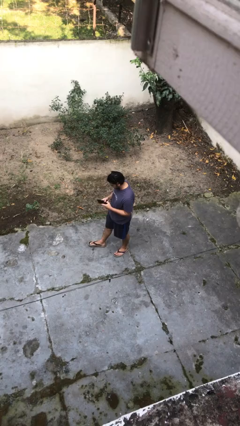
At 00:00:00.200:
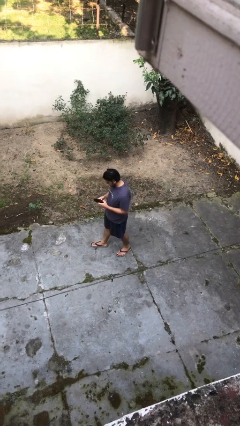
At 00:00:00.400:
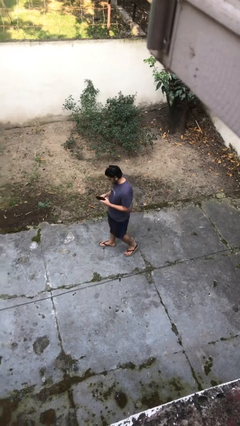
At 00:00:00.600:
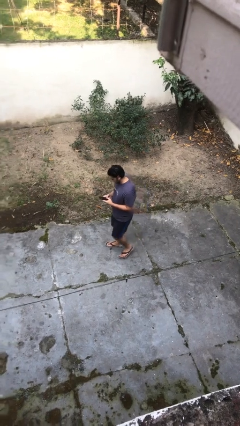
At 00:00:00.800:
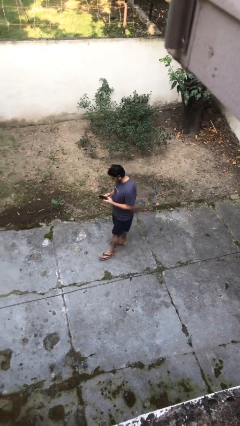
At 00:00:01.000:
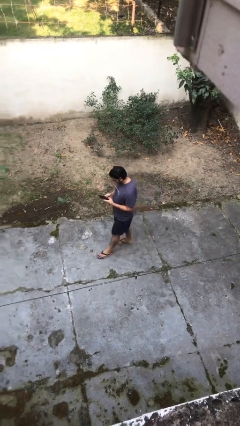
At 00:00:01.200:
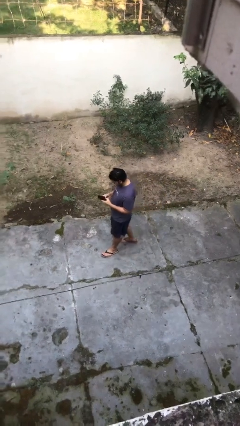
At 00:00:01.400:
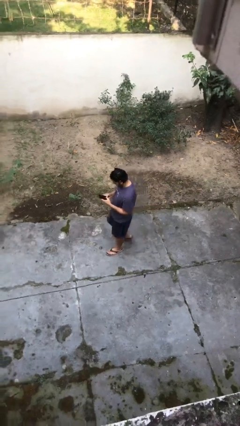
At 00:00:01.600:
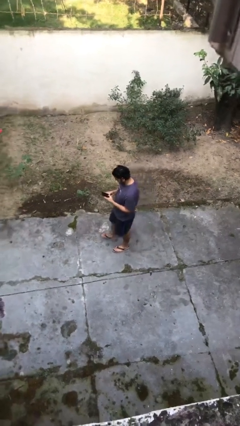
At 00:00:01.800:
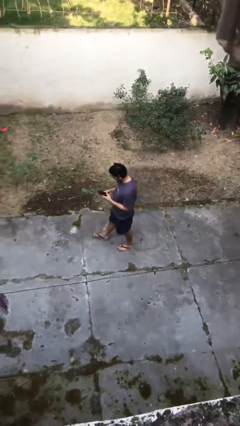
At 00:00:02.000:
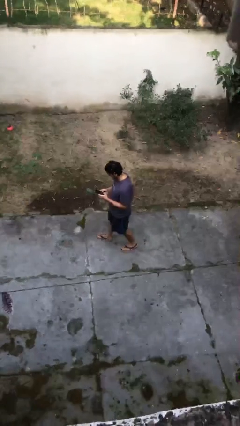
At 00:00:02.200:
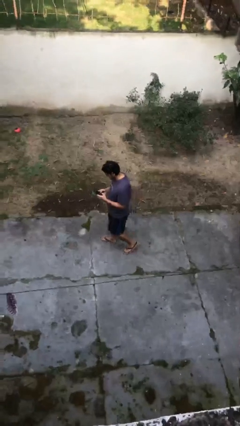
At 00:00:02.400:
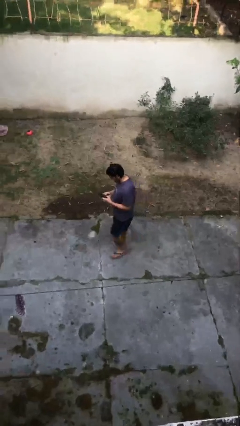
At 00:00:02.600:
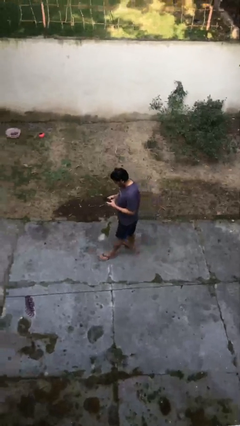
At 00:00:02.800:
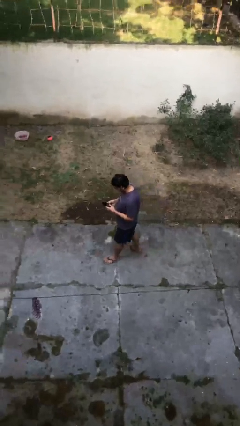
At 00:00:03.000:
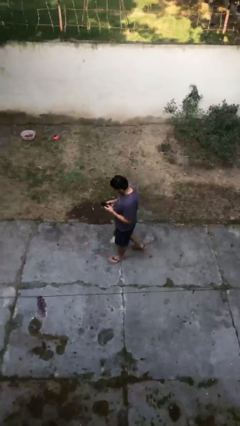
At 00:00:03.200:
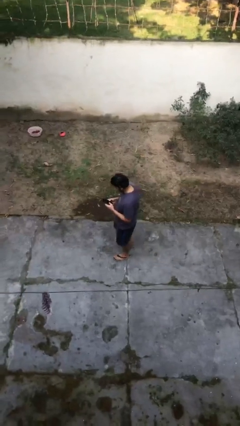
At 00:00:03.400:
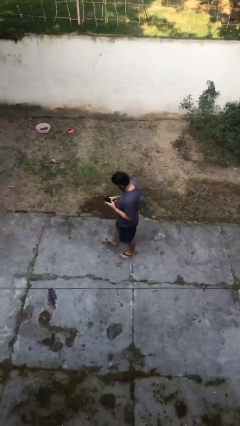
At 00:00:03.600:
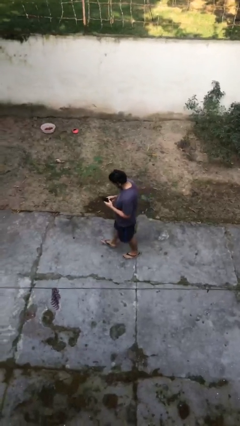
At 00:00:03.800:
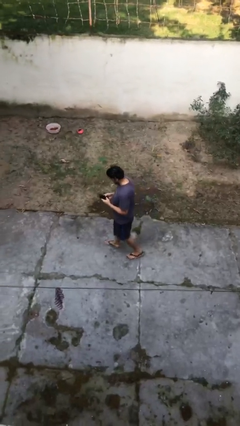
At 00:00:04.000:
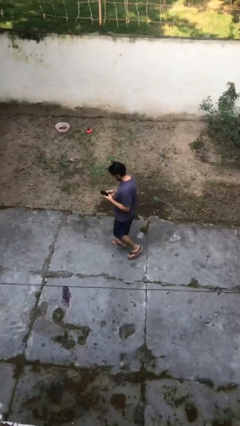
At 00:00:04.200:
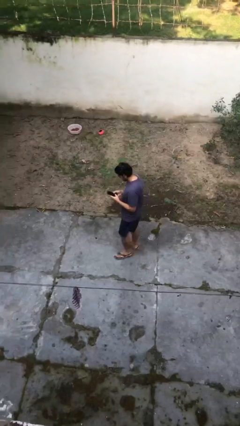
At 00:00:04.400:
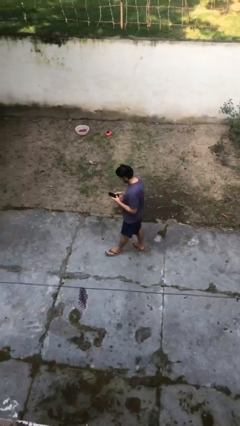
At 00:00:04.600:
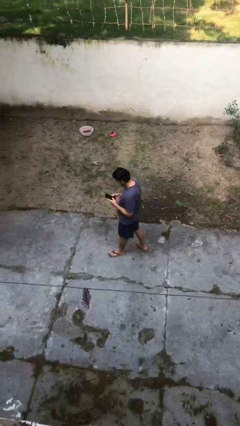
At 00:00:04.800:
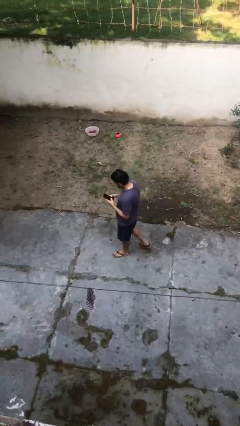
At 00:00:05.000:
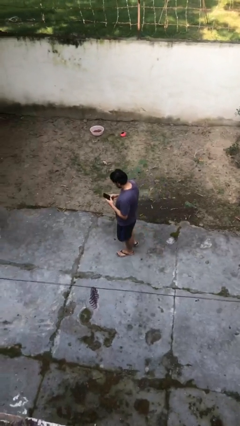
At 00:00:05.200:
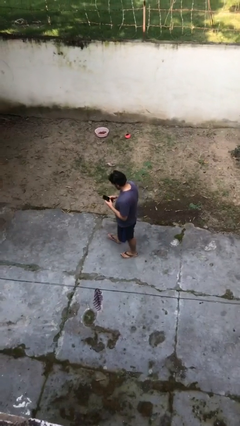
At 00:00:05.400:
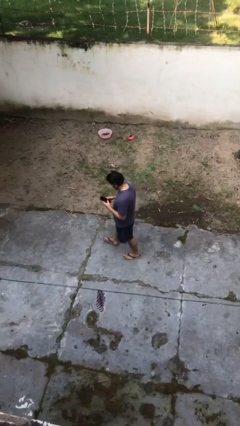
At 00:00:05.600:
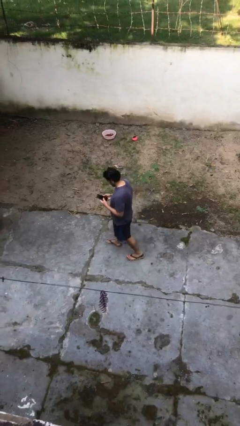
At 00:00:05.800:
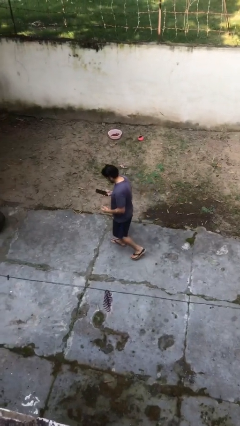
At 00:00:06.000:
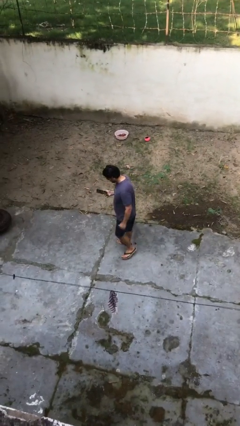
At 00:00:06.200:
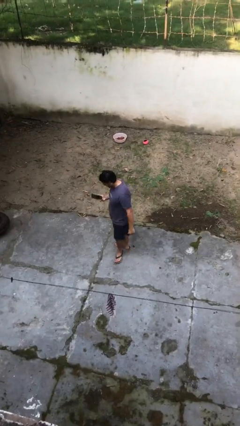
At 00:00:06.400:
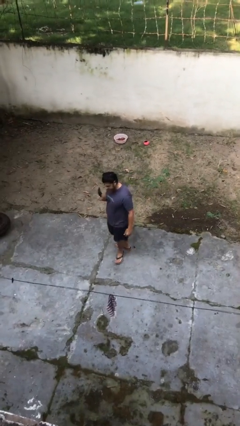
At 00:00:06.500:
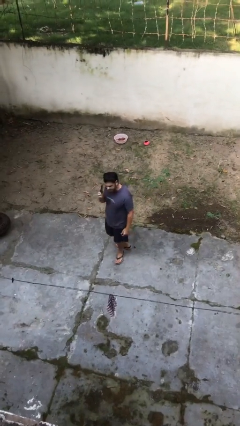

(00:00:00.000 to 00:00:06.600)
person texts on phone

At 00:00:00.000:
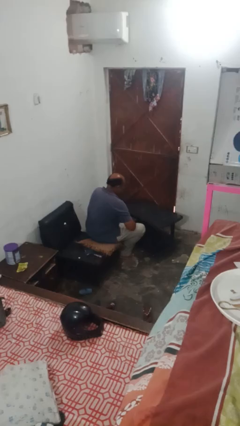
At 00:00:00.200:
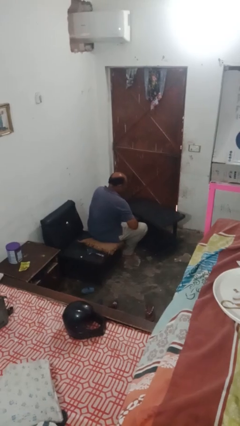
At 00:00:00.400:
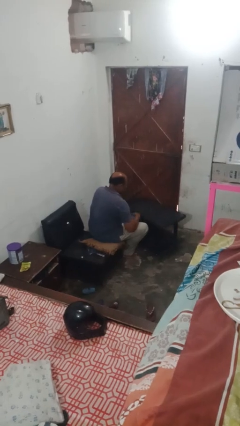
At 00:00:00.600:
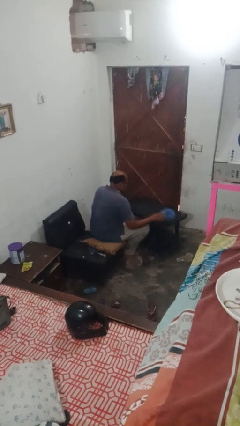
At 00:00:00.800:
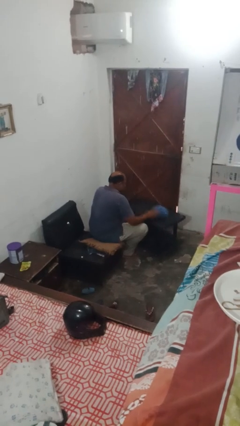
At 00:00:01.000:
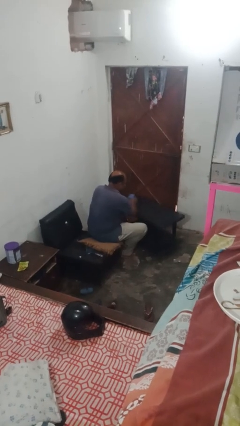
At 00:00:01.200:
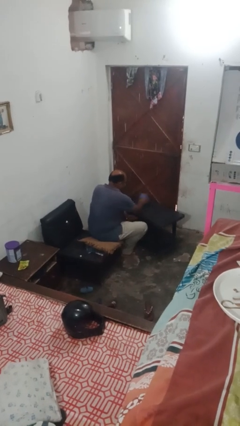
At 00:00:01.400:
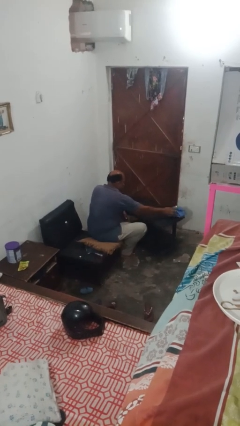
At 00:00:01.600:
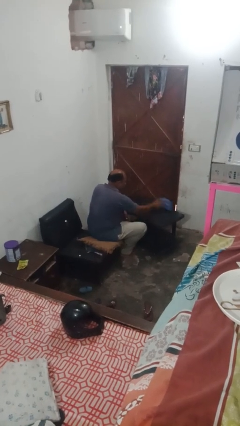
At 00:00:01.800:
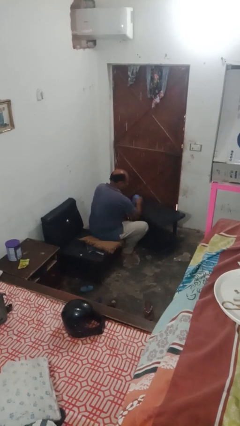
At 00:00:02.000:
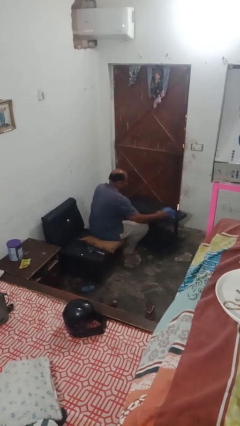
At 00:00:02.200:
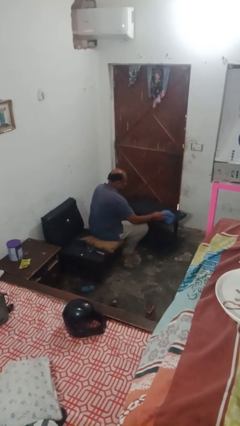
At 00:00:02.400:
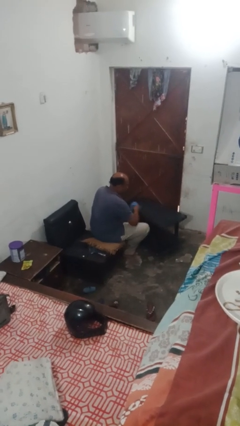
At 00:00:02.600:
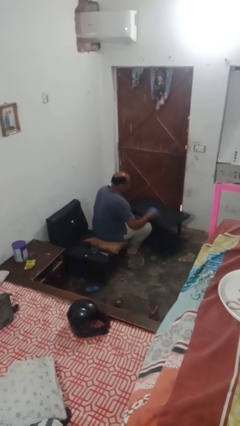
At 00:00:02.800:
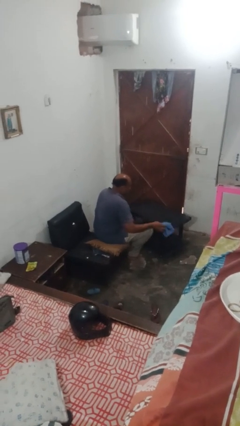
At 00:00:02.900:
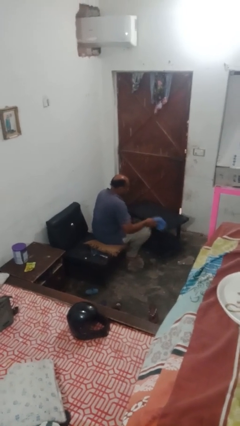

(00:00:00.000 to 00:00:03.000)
person cleans table with rag

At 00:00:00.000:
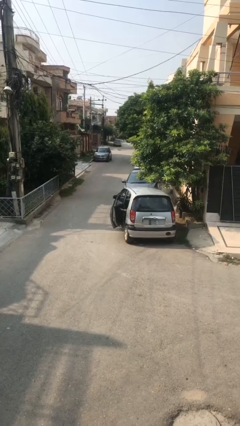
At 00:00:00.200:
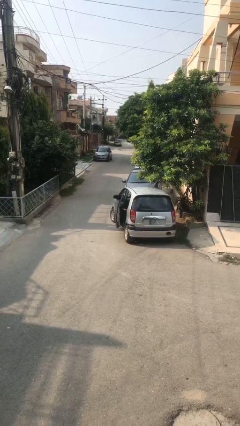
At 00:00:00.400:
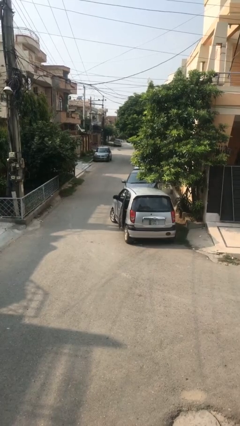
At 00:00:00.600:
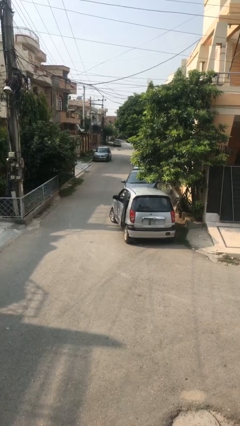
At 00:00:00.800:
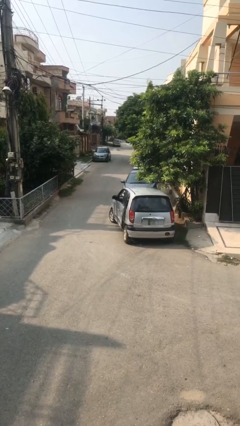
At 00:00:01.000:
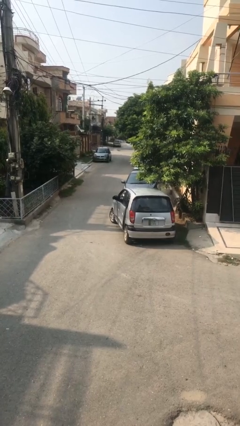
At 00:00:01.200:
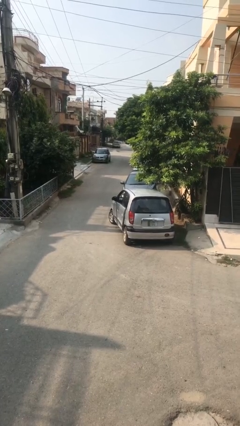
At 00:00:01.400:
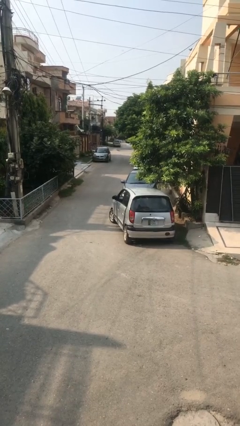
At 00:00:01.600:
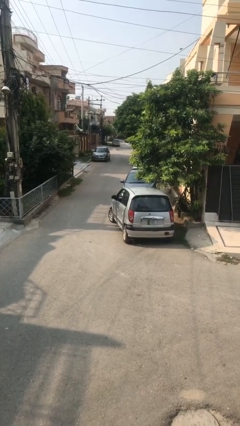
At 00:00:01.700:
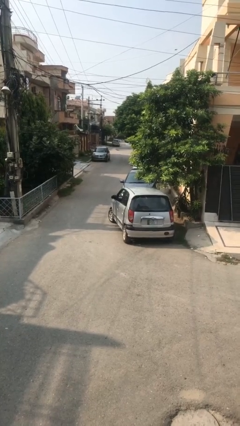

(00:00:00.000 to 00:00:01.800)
person closes car door

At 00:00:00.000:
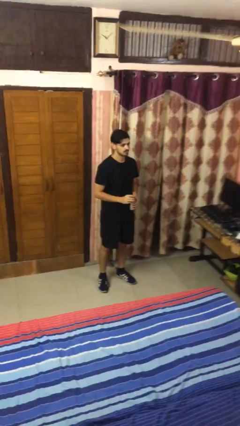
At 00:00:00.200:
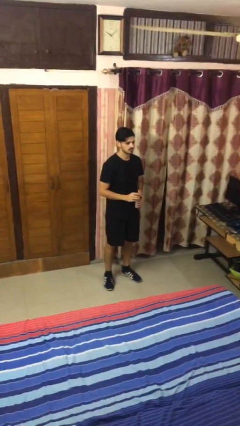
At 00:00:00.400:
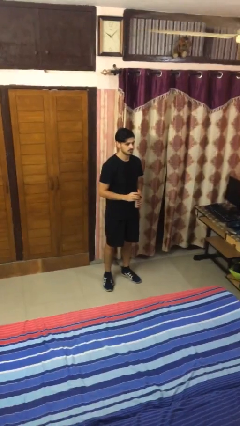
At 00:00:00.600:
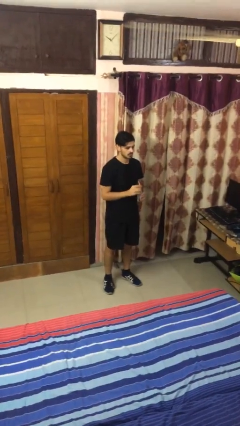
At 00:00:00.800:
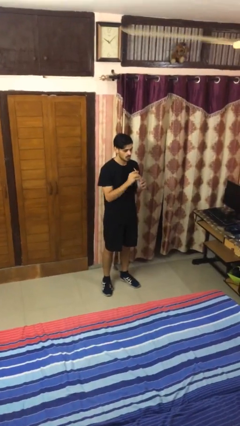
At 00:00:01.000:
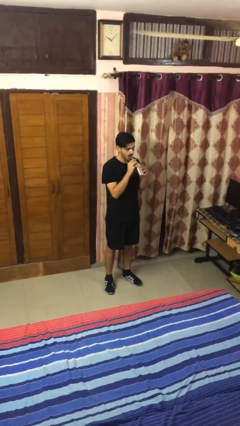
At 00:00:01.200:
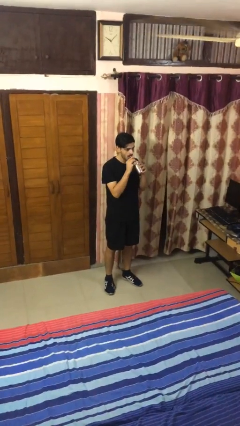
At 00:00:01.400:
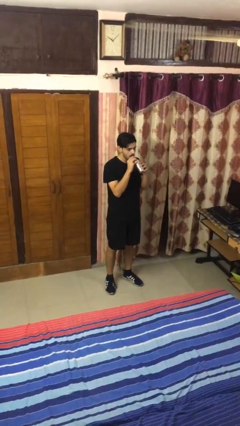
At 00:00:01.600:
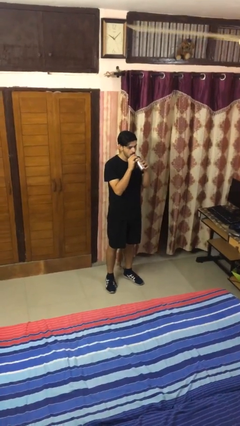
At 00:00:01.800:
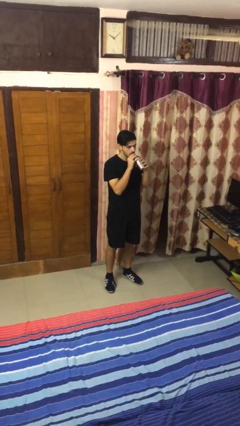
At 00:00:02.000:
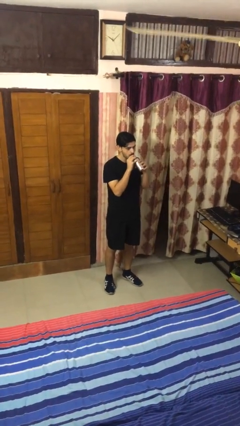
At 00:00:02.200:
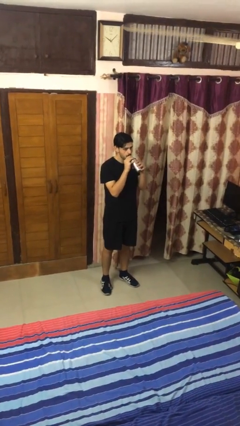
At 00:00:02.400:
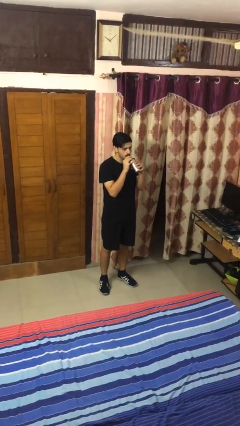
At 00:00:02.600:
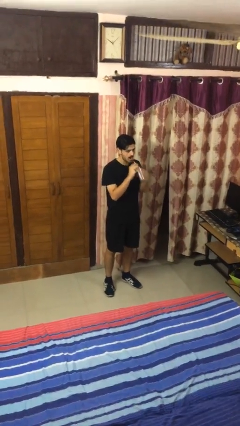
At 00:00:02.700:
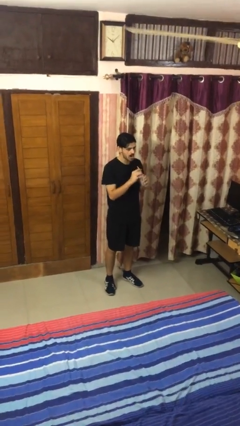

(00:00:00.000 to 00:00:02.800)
person drinks from straw

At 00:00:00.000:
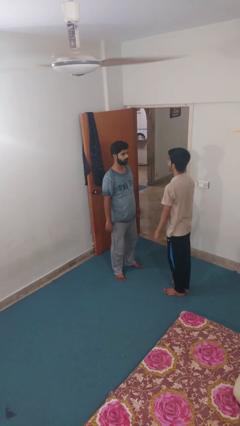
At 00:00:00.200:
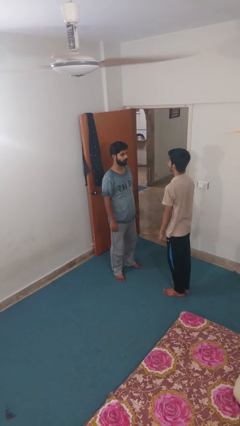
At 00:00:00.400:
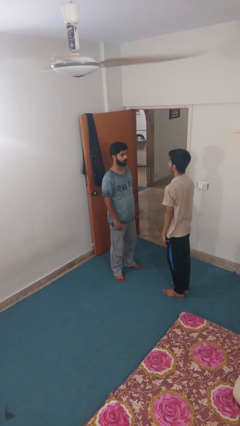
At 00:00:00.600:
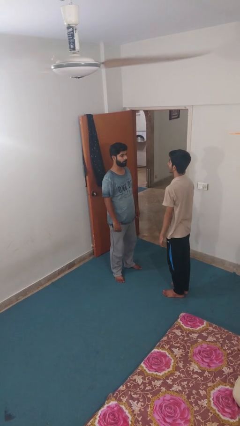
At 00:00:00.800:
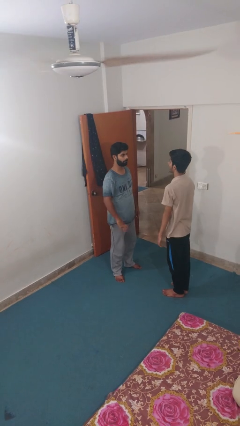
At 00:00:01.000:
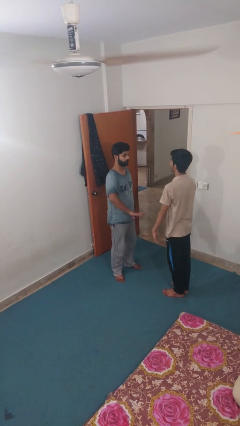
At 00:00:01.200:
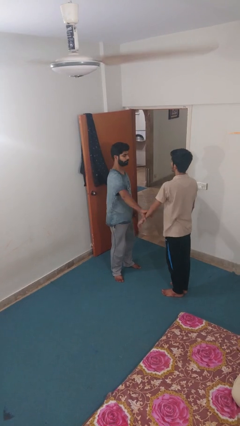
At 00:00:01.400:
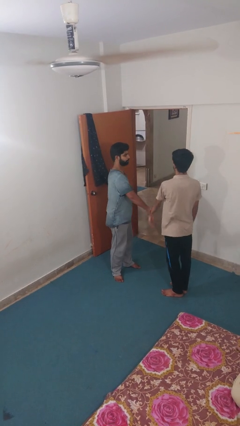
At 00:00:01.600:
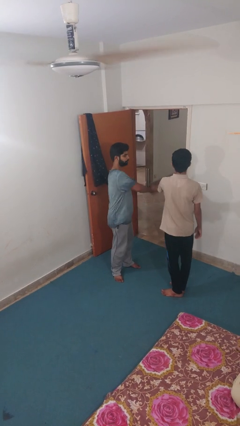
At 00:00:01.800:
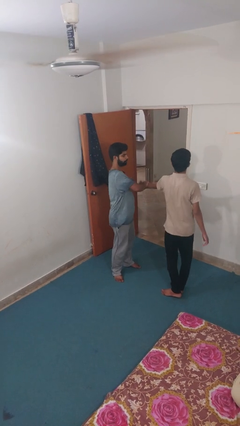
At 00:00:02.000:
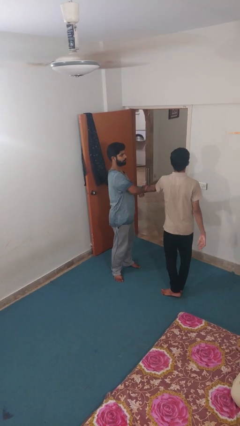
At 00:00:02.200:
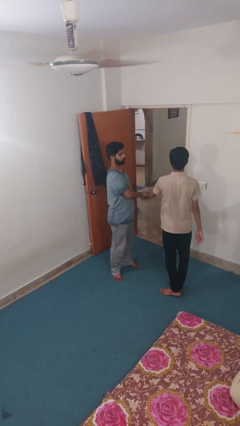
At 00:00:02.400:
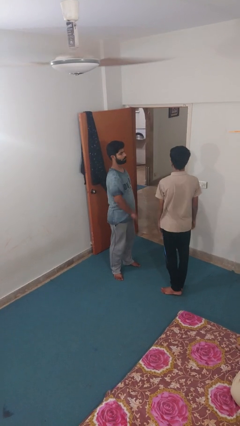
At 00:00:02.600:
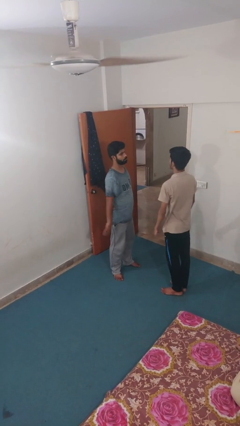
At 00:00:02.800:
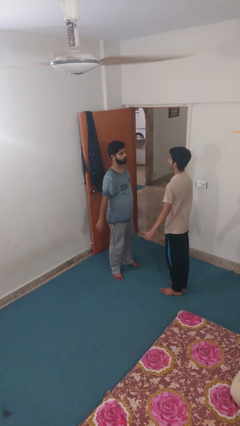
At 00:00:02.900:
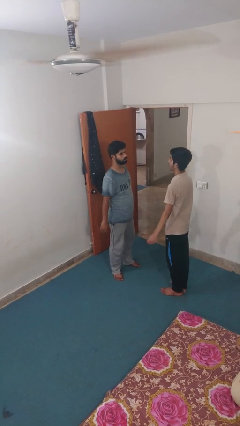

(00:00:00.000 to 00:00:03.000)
person grabs person by forearm
